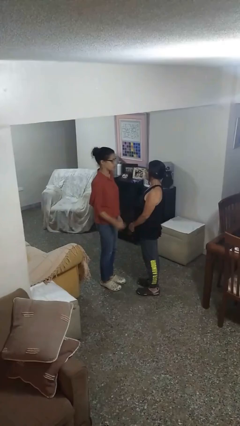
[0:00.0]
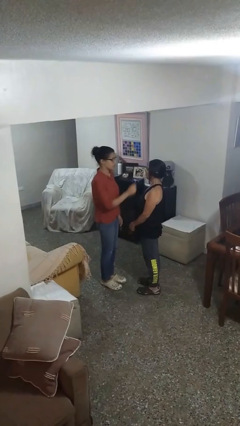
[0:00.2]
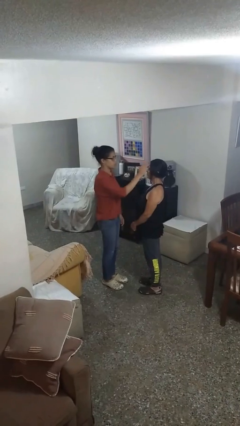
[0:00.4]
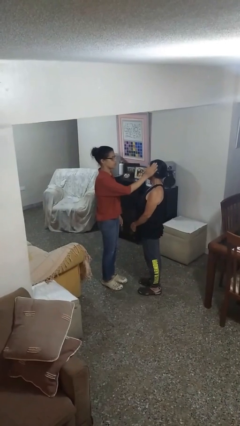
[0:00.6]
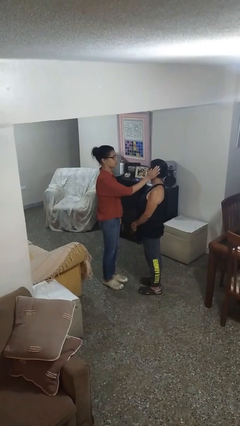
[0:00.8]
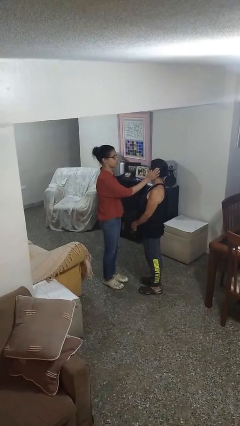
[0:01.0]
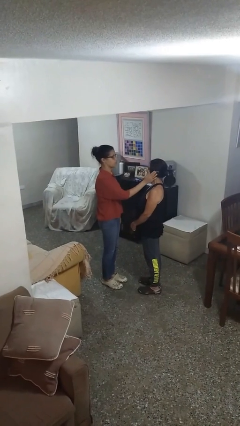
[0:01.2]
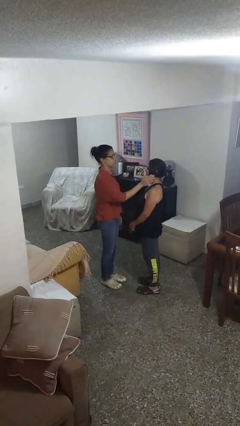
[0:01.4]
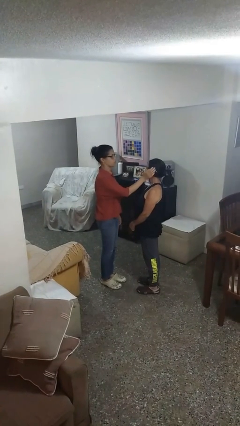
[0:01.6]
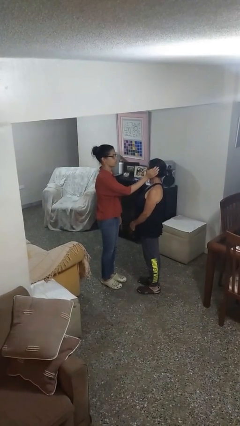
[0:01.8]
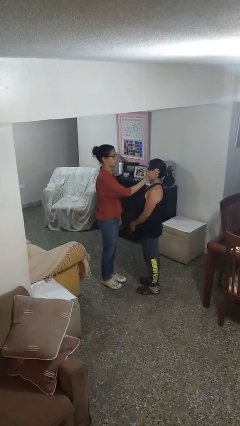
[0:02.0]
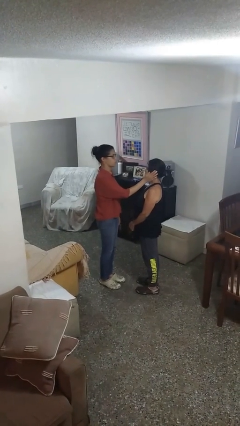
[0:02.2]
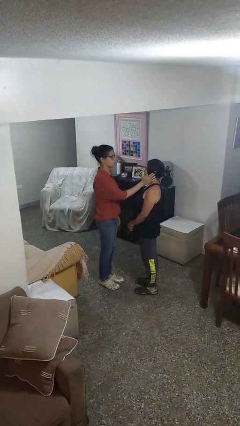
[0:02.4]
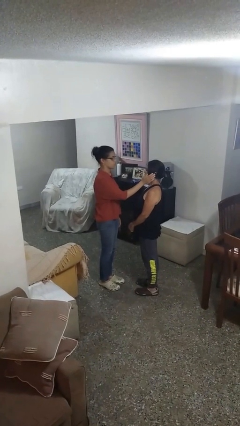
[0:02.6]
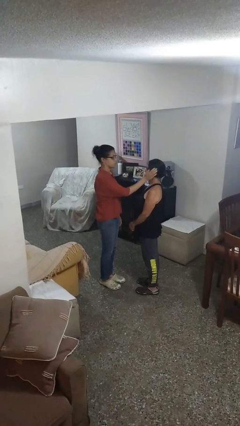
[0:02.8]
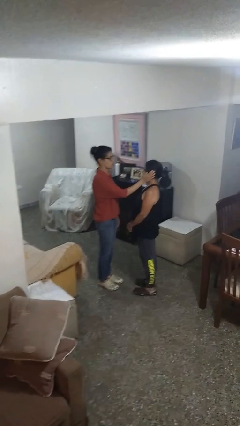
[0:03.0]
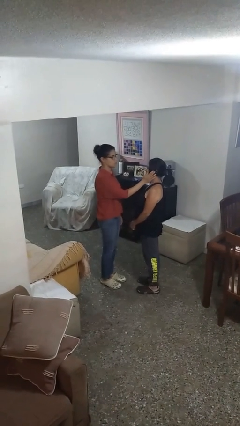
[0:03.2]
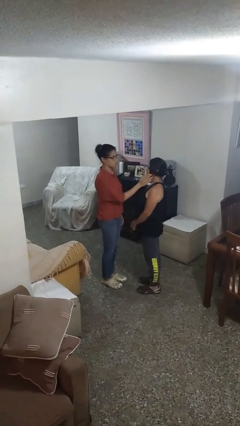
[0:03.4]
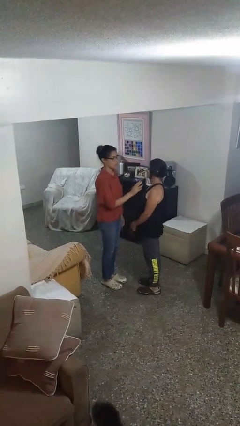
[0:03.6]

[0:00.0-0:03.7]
person touches face of person

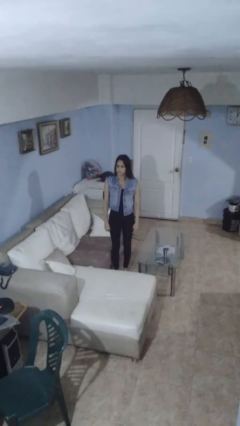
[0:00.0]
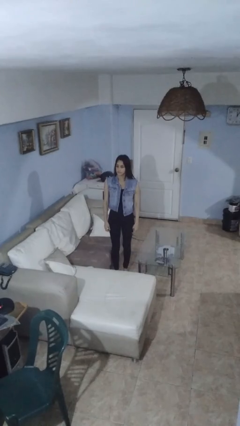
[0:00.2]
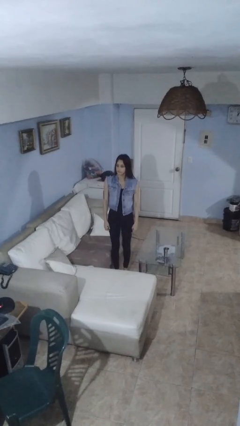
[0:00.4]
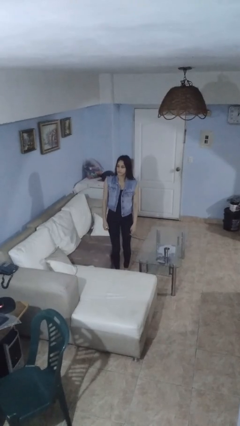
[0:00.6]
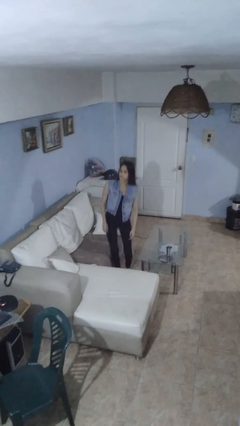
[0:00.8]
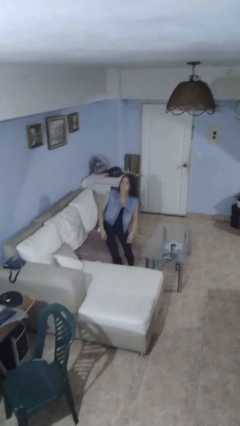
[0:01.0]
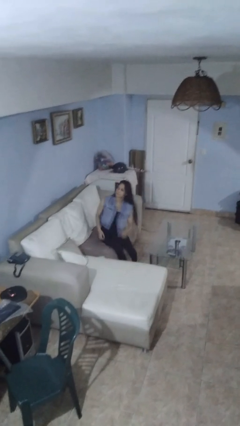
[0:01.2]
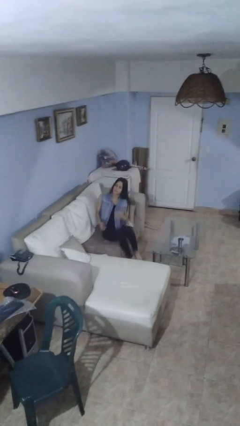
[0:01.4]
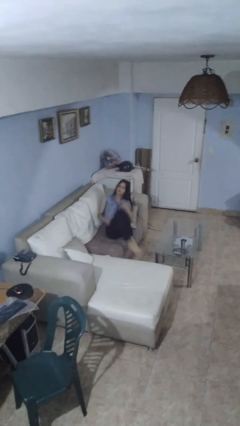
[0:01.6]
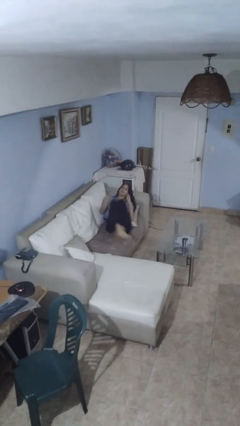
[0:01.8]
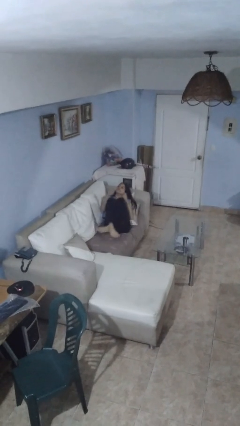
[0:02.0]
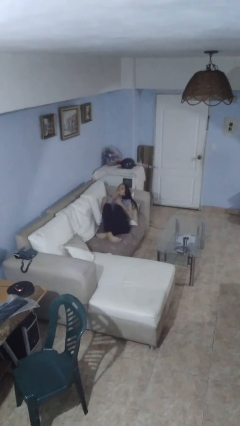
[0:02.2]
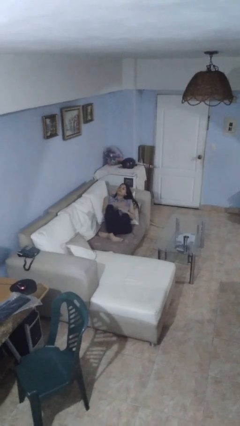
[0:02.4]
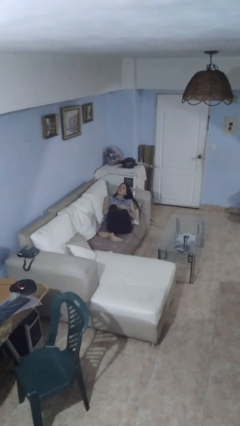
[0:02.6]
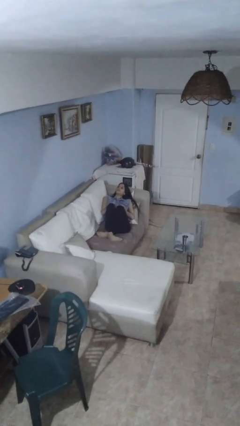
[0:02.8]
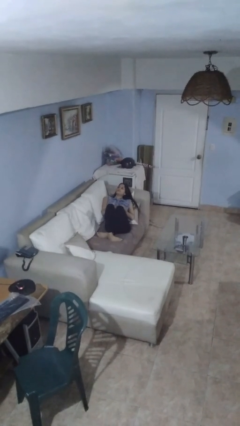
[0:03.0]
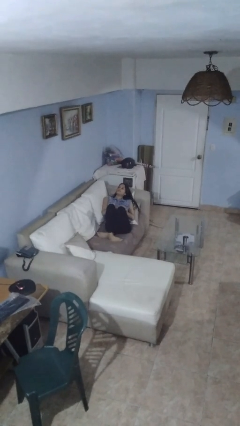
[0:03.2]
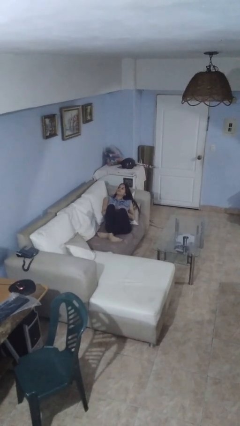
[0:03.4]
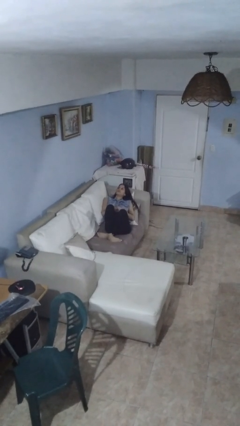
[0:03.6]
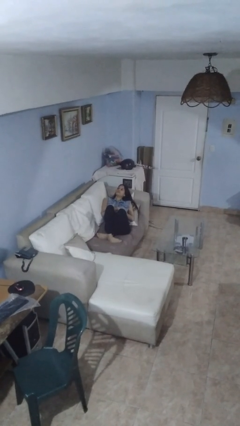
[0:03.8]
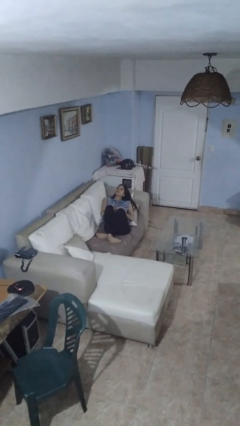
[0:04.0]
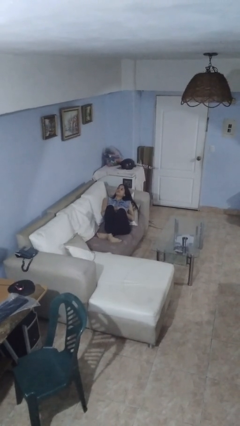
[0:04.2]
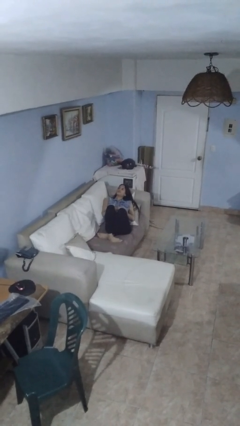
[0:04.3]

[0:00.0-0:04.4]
person lies down on couch

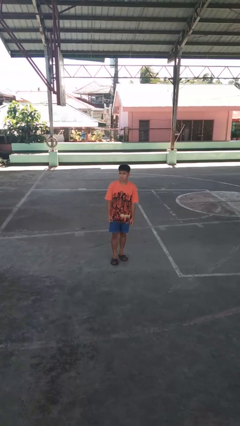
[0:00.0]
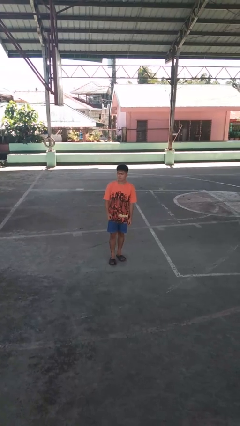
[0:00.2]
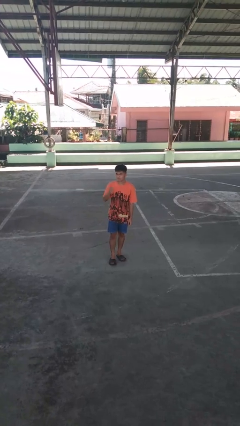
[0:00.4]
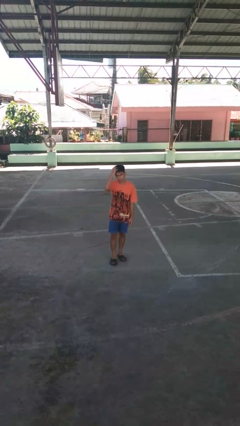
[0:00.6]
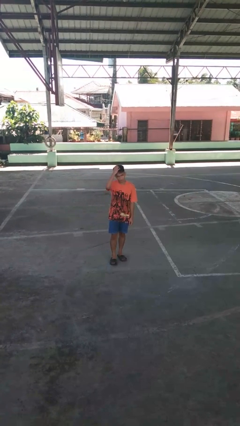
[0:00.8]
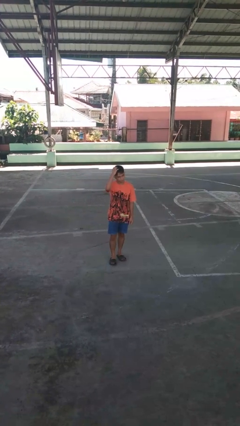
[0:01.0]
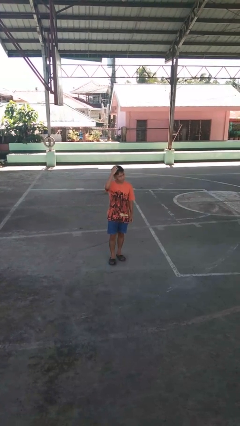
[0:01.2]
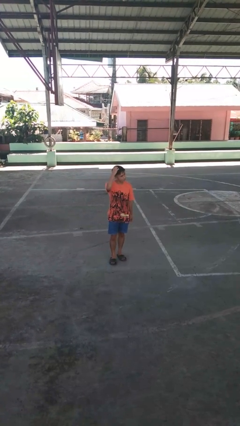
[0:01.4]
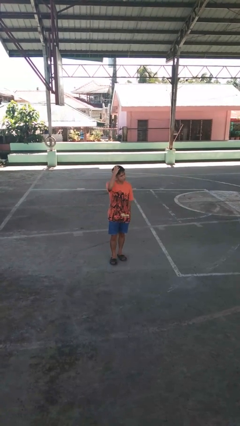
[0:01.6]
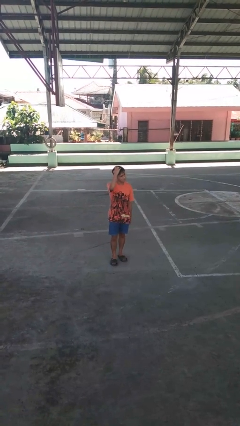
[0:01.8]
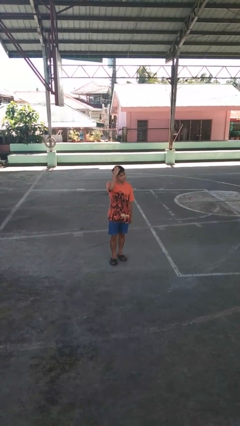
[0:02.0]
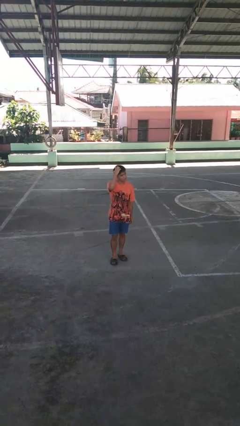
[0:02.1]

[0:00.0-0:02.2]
person scratches face

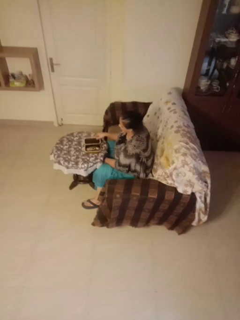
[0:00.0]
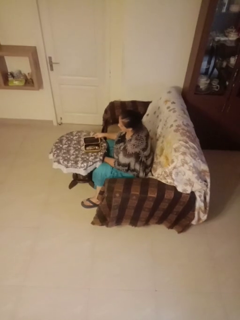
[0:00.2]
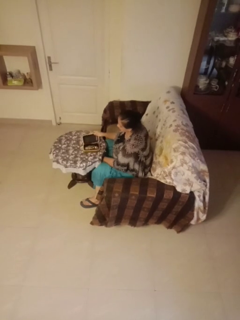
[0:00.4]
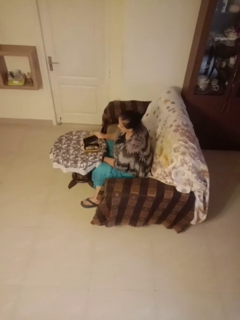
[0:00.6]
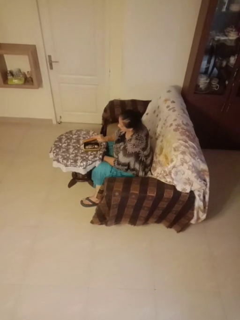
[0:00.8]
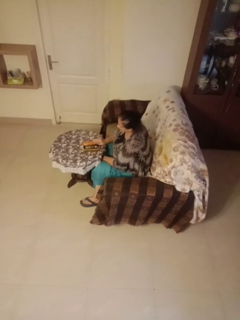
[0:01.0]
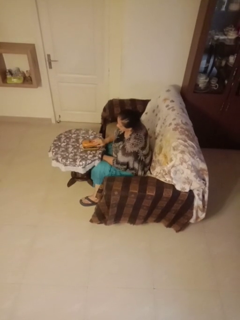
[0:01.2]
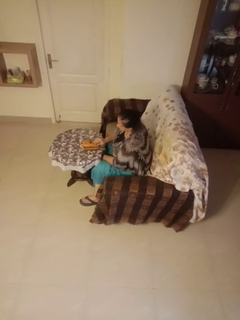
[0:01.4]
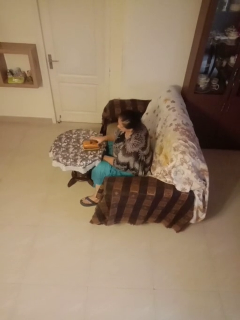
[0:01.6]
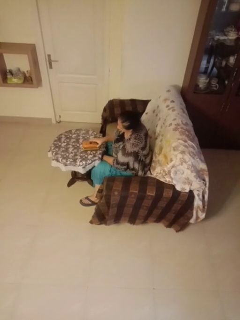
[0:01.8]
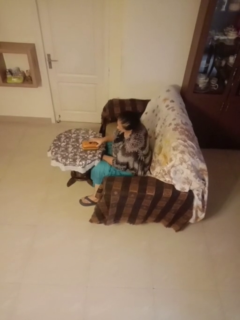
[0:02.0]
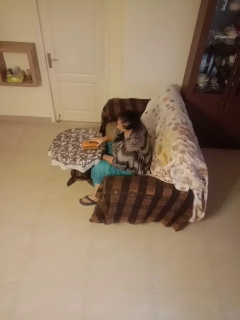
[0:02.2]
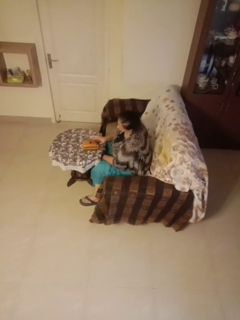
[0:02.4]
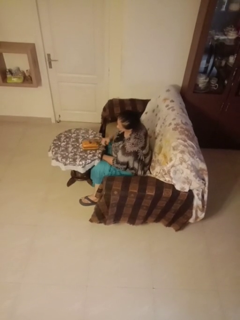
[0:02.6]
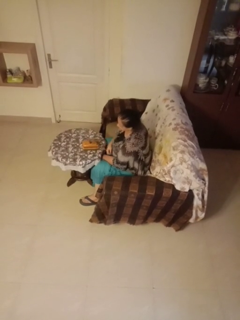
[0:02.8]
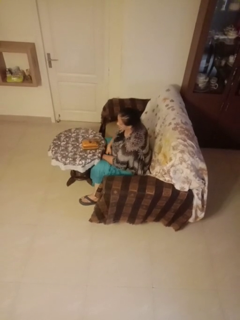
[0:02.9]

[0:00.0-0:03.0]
person closes jewelry box

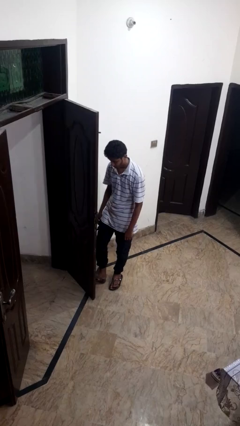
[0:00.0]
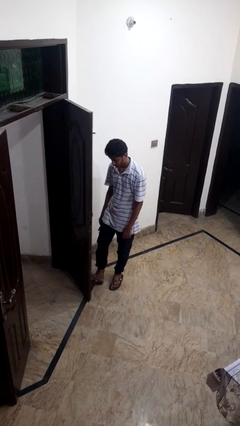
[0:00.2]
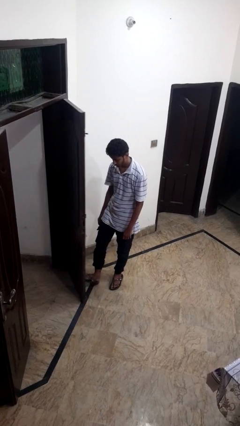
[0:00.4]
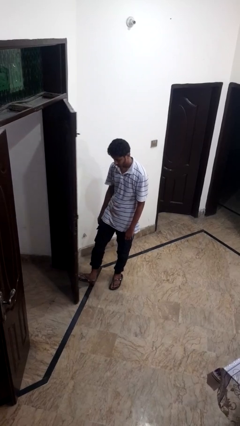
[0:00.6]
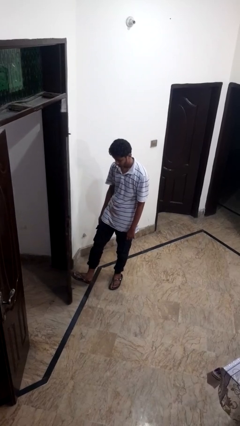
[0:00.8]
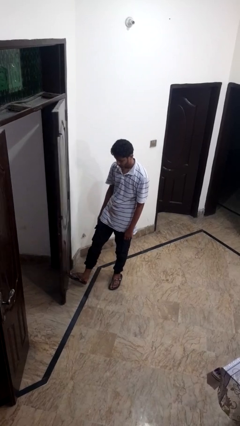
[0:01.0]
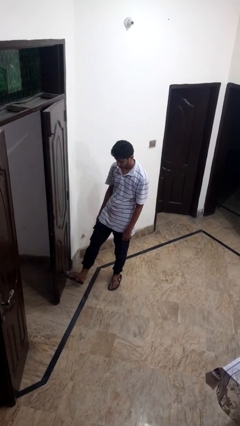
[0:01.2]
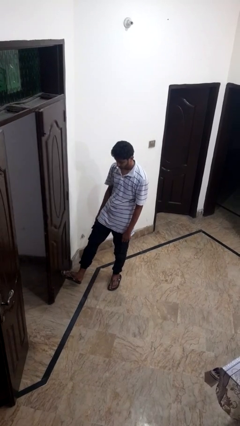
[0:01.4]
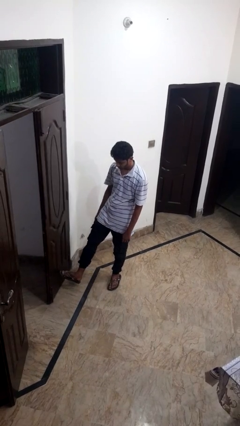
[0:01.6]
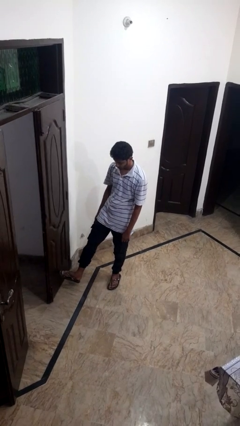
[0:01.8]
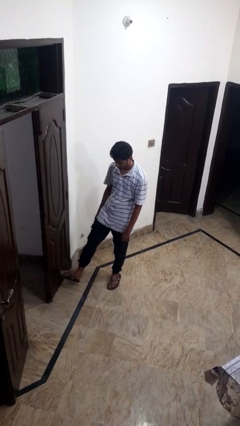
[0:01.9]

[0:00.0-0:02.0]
person closes door with foot

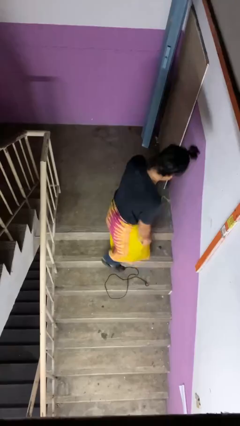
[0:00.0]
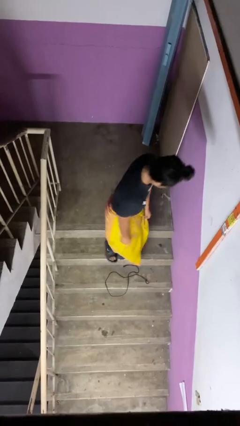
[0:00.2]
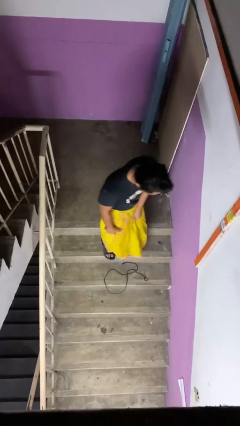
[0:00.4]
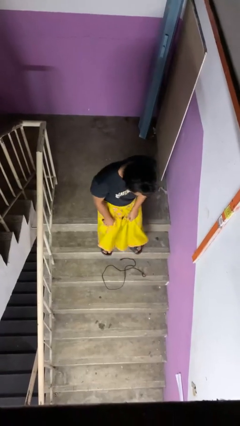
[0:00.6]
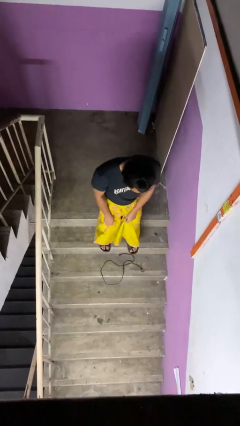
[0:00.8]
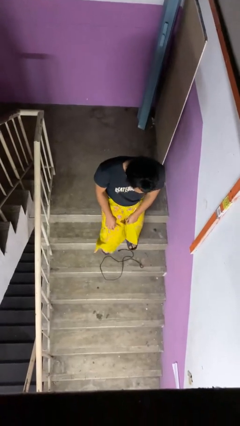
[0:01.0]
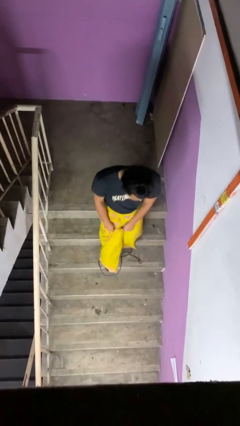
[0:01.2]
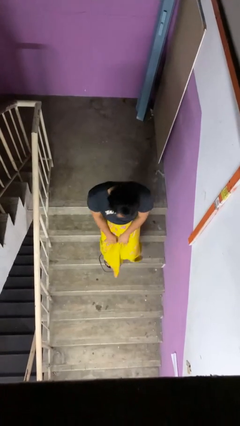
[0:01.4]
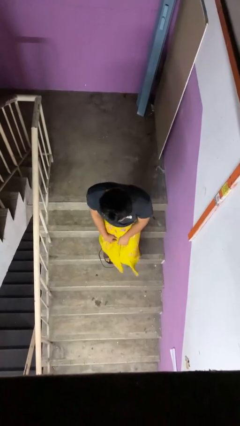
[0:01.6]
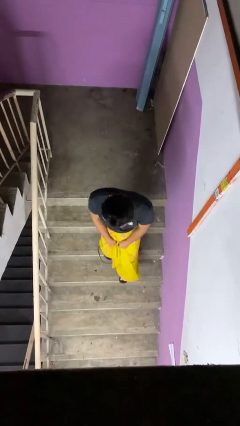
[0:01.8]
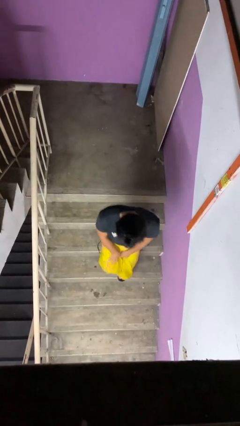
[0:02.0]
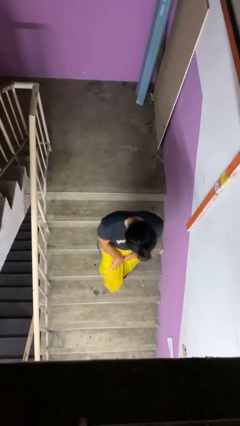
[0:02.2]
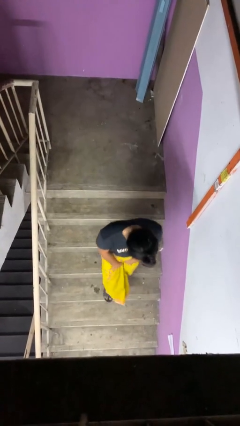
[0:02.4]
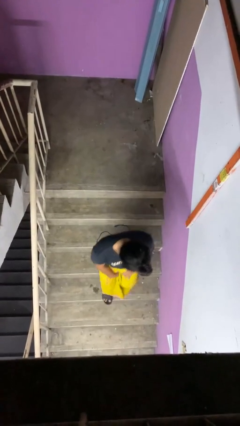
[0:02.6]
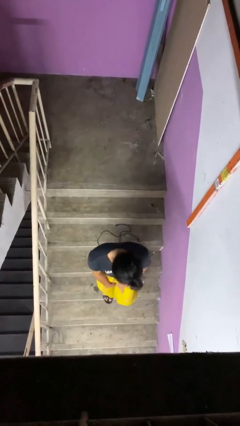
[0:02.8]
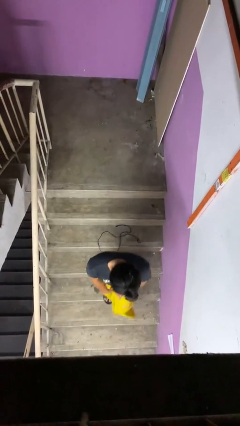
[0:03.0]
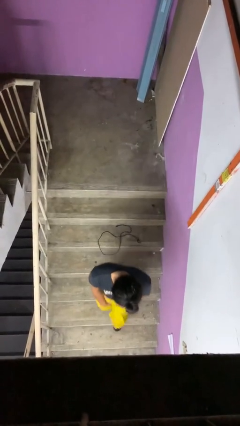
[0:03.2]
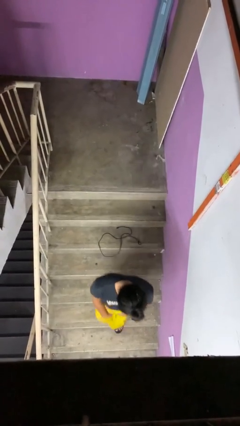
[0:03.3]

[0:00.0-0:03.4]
person climbs down stairs
